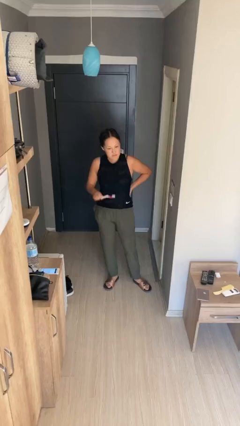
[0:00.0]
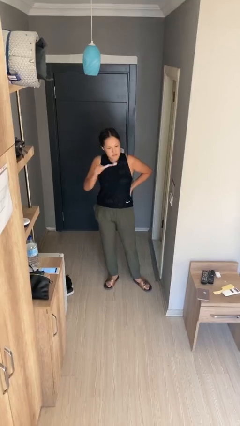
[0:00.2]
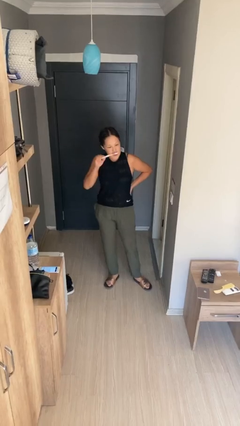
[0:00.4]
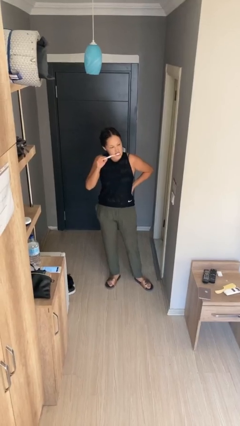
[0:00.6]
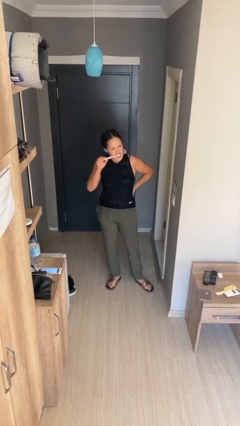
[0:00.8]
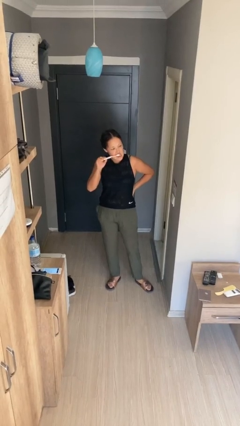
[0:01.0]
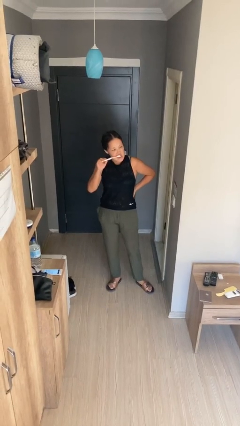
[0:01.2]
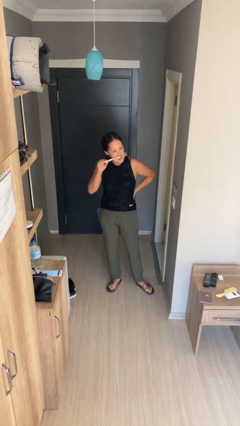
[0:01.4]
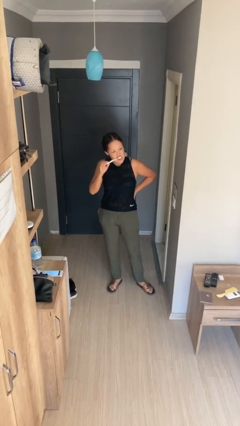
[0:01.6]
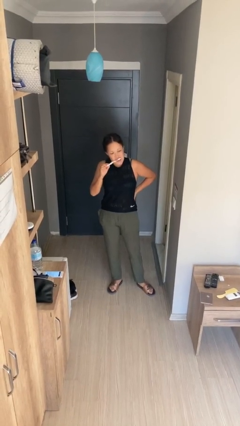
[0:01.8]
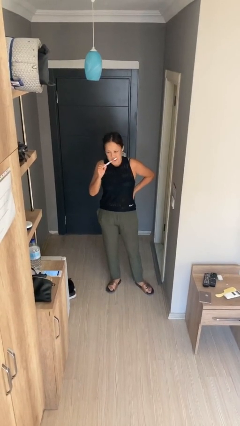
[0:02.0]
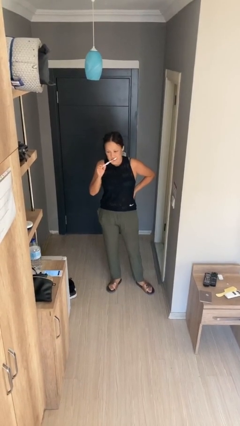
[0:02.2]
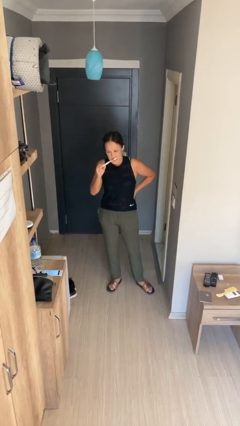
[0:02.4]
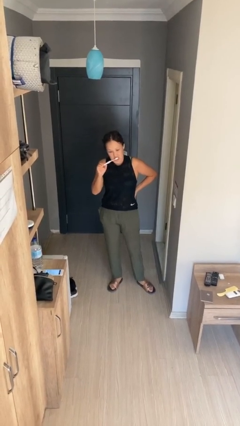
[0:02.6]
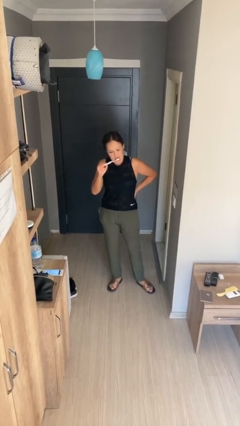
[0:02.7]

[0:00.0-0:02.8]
person brushes teeth

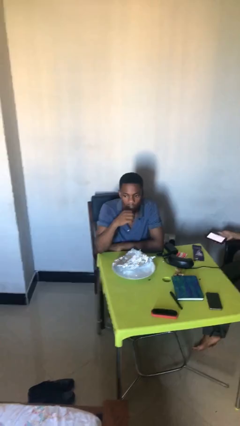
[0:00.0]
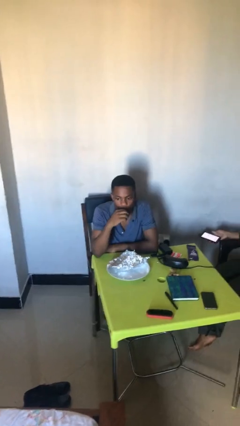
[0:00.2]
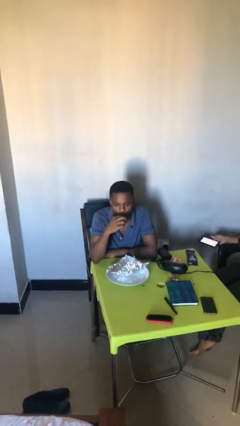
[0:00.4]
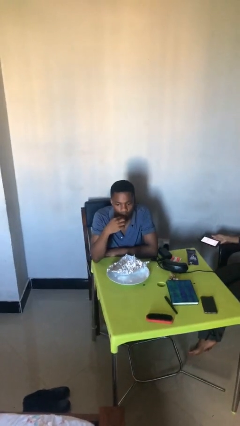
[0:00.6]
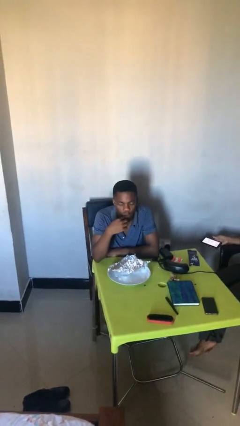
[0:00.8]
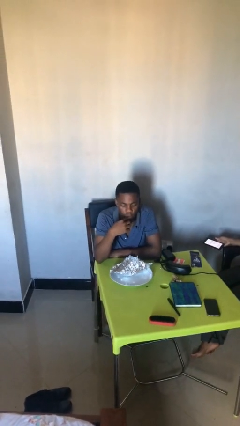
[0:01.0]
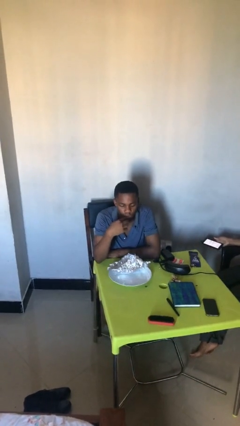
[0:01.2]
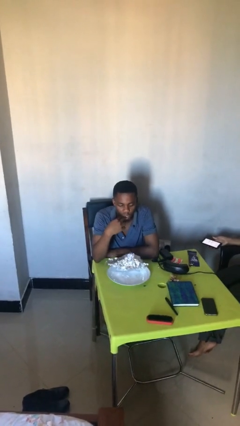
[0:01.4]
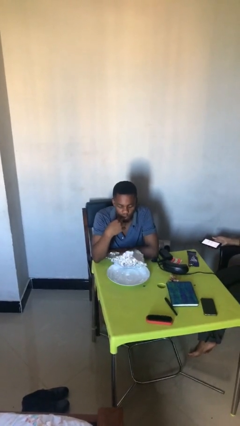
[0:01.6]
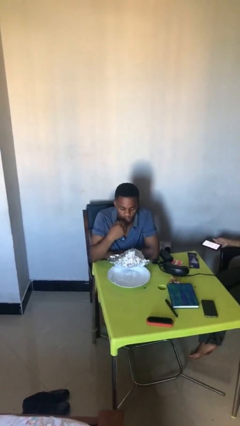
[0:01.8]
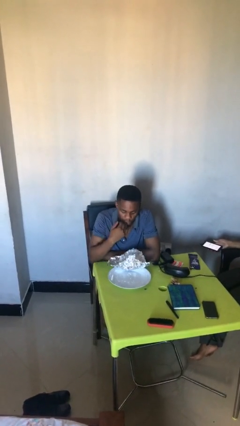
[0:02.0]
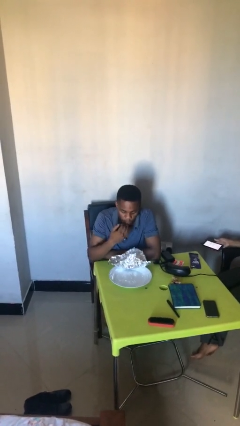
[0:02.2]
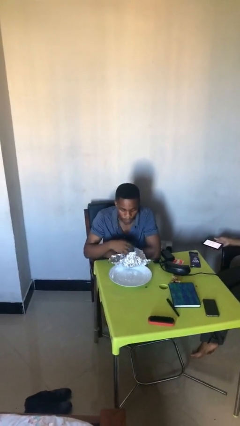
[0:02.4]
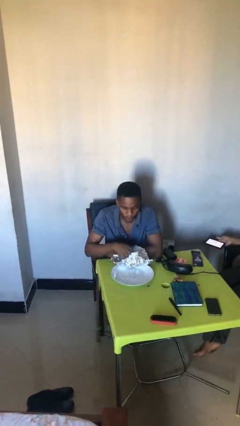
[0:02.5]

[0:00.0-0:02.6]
person licks fingers

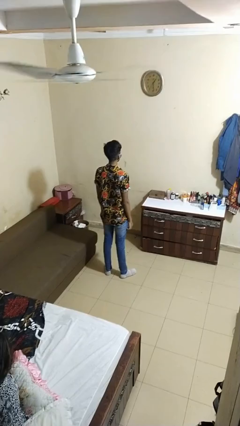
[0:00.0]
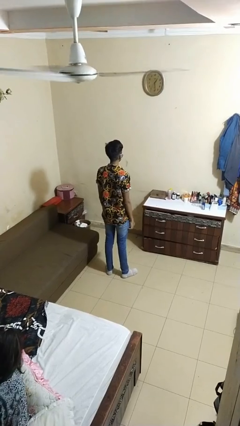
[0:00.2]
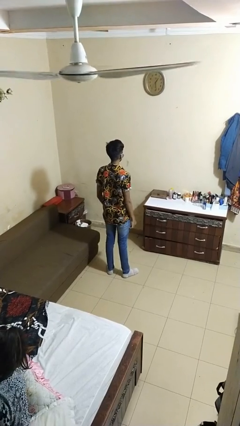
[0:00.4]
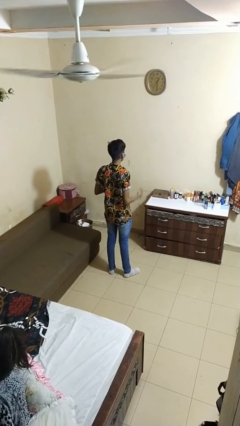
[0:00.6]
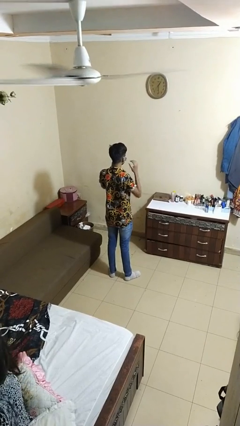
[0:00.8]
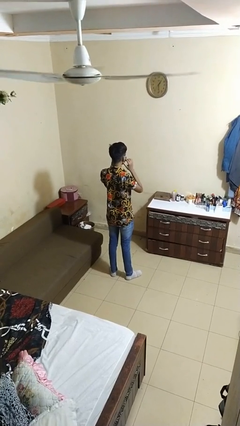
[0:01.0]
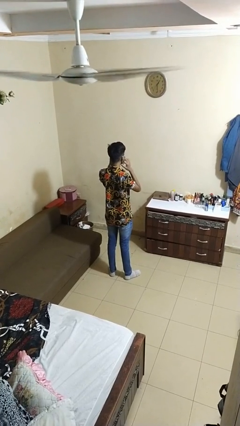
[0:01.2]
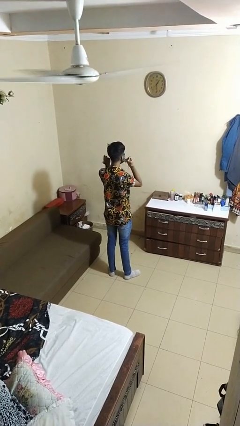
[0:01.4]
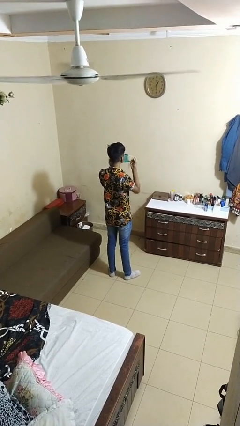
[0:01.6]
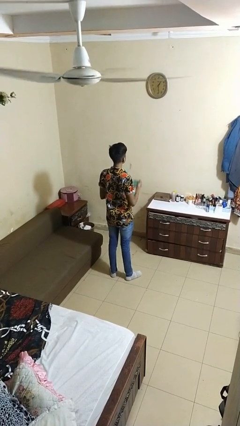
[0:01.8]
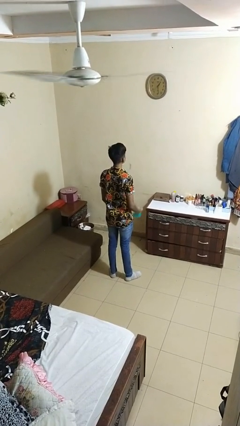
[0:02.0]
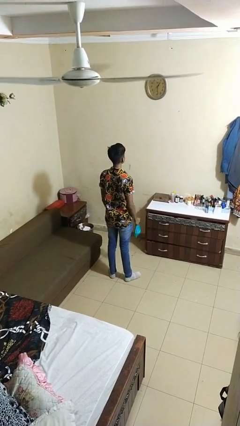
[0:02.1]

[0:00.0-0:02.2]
person takes off facemask

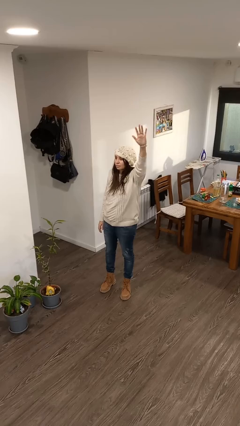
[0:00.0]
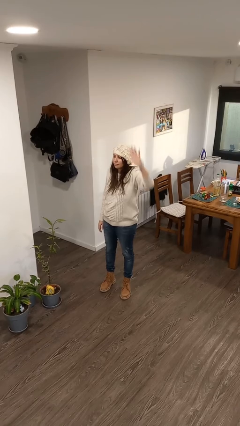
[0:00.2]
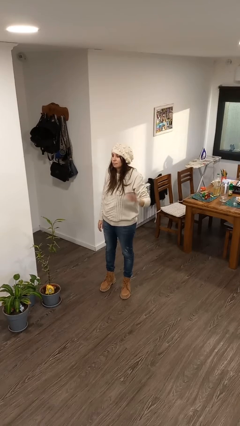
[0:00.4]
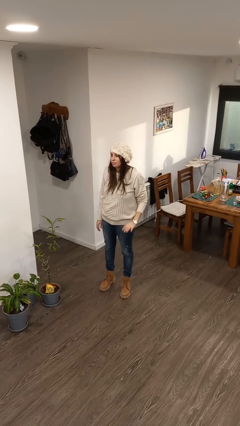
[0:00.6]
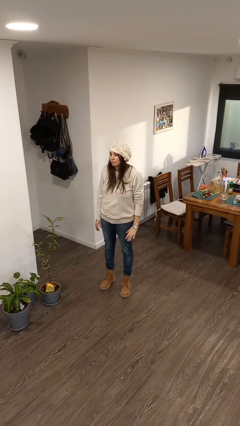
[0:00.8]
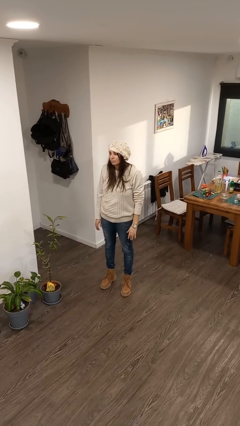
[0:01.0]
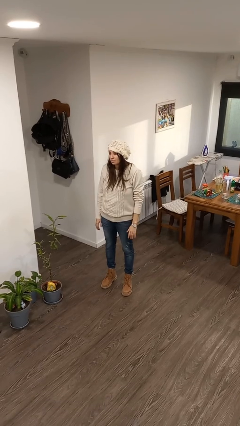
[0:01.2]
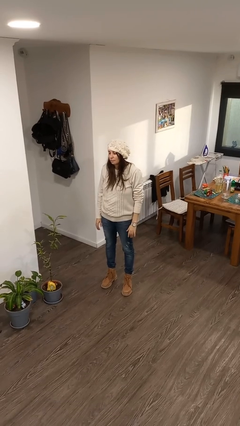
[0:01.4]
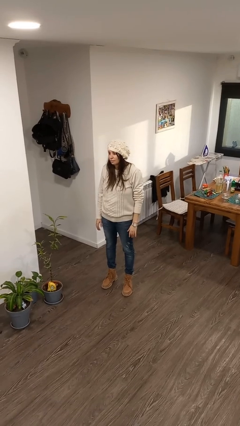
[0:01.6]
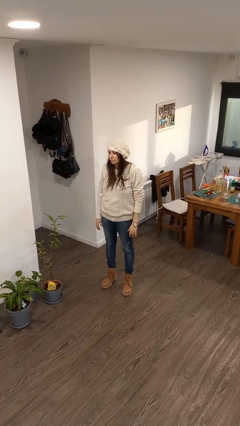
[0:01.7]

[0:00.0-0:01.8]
person gestures lower hand

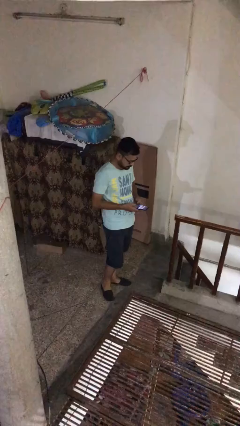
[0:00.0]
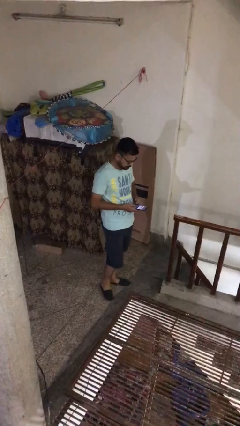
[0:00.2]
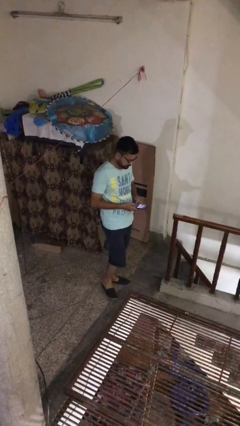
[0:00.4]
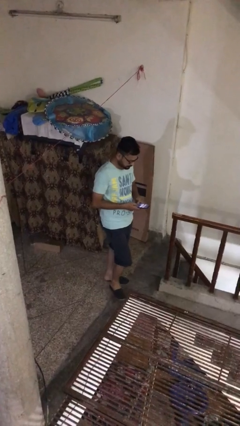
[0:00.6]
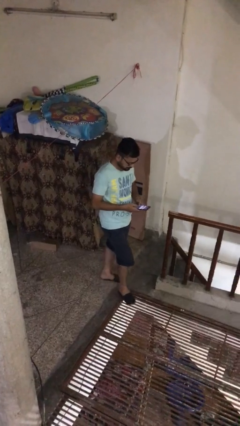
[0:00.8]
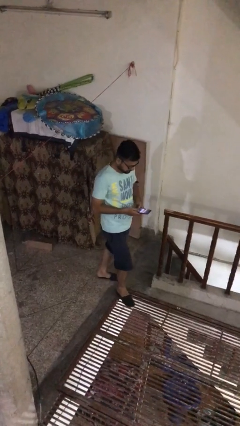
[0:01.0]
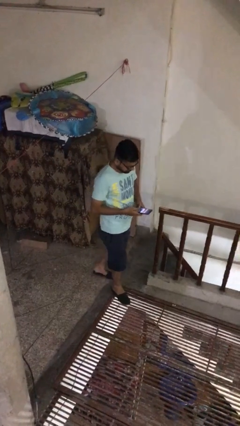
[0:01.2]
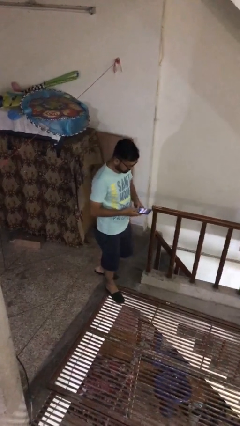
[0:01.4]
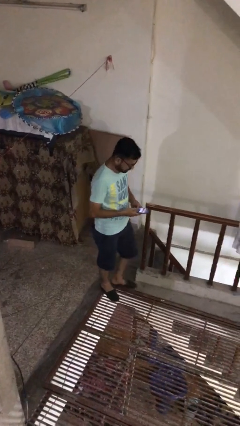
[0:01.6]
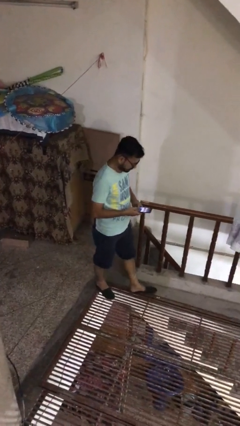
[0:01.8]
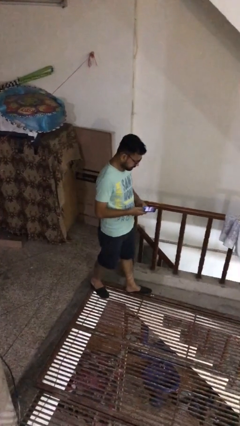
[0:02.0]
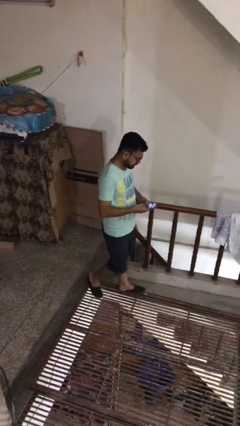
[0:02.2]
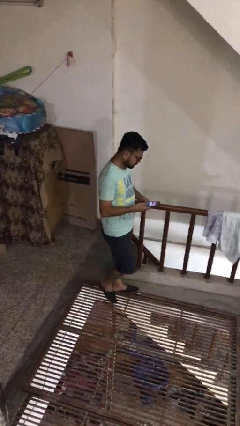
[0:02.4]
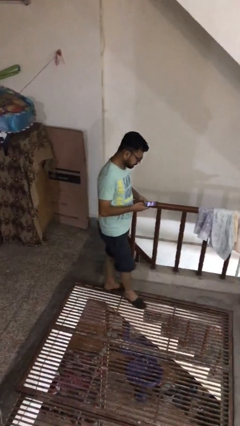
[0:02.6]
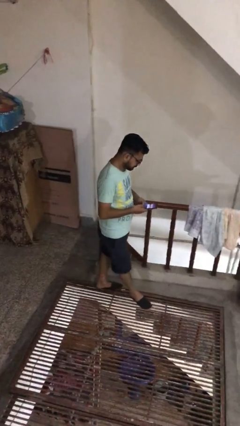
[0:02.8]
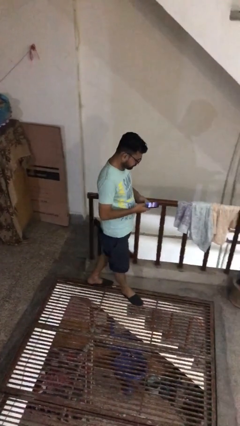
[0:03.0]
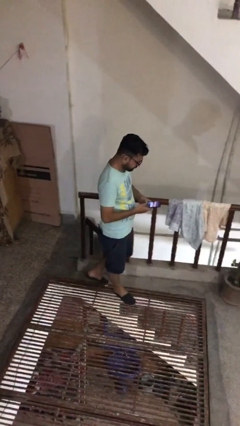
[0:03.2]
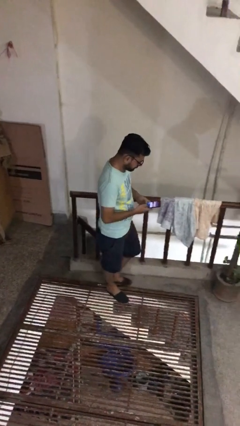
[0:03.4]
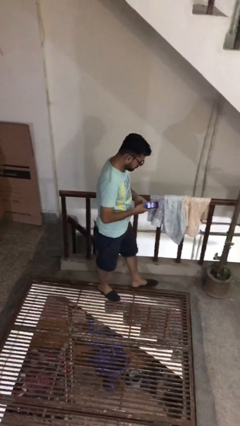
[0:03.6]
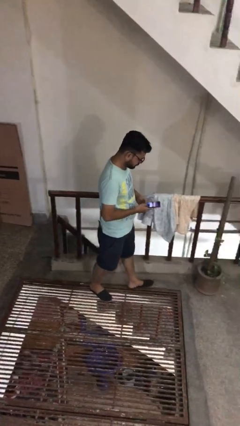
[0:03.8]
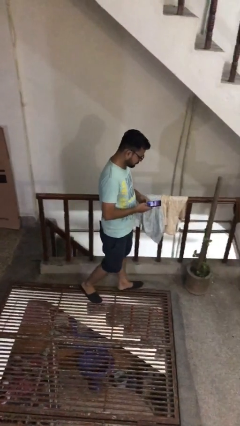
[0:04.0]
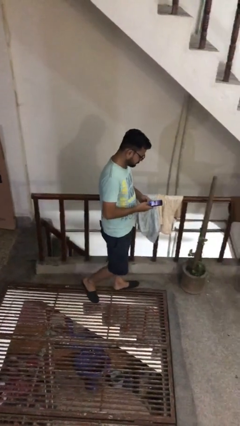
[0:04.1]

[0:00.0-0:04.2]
person texts on phone

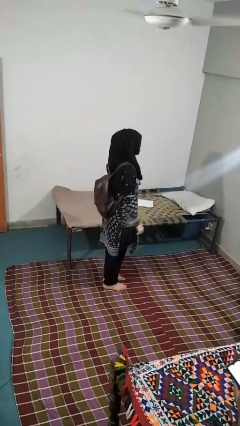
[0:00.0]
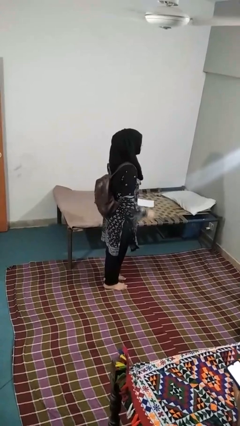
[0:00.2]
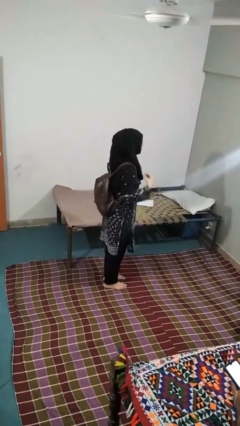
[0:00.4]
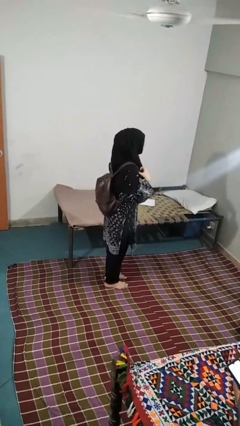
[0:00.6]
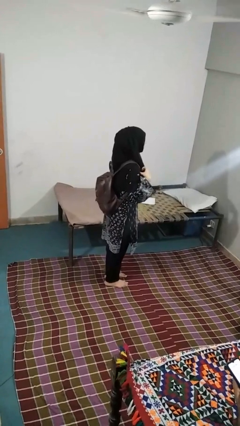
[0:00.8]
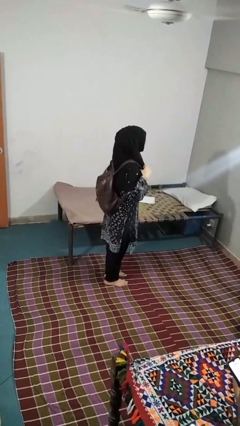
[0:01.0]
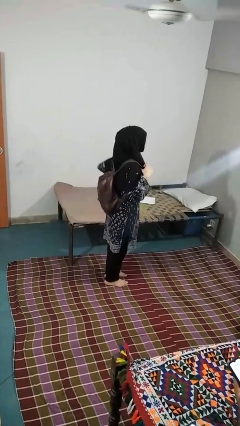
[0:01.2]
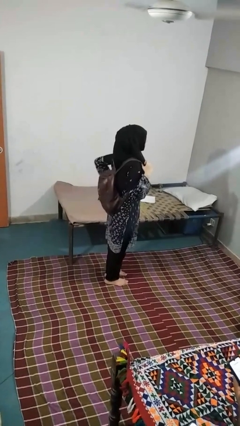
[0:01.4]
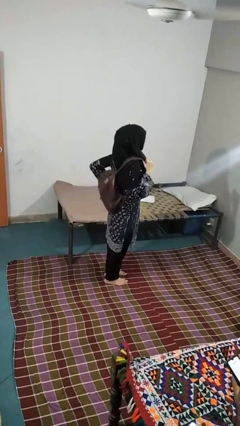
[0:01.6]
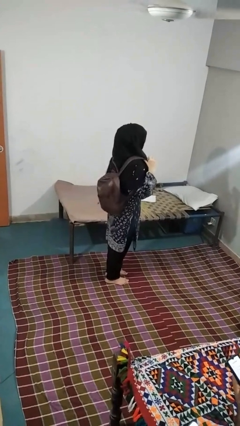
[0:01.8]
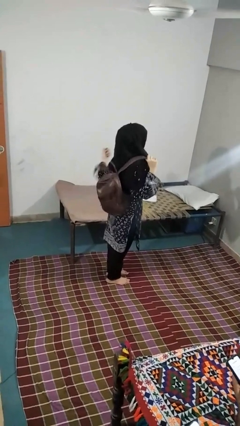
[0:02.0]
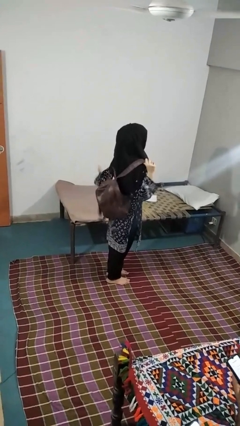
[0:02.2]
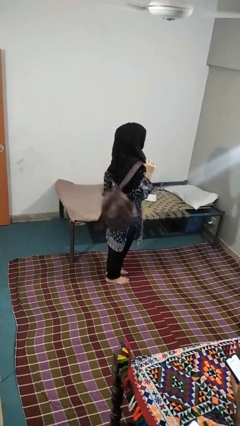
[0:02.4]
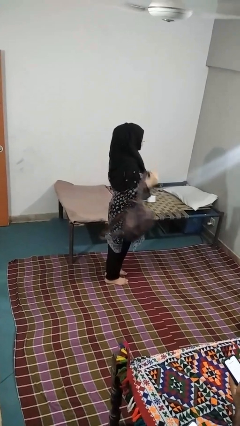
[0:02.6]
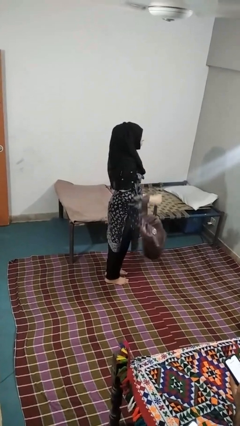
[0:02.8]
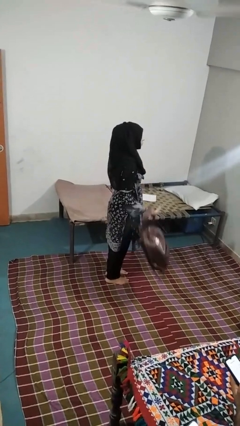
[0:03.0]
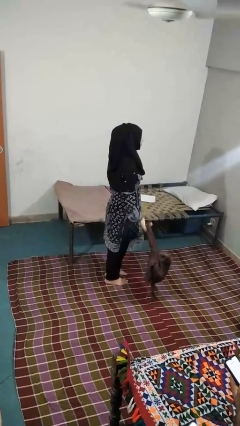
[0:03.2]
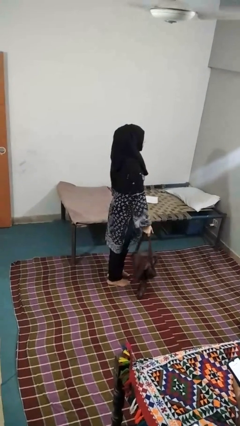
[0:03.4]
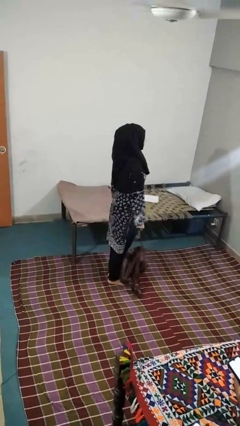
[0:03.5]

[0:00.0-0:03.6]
person takes off backpack
